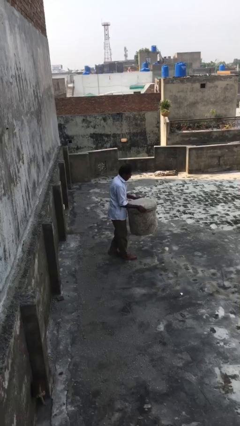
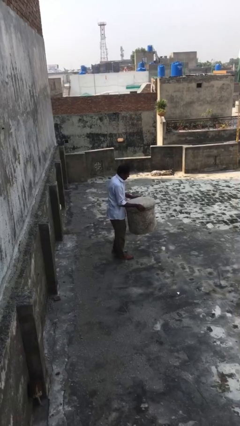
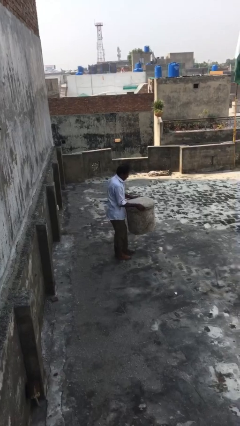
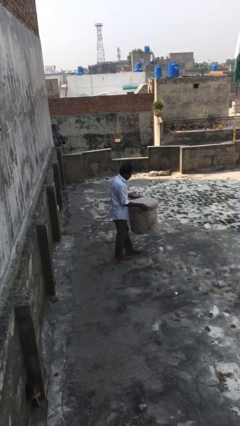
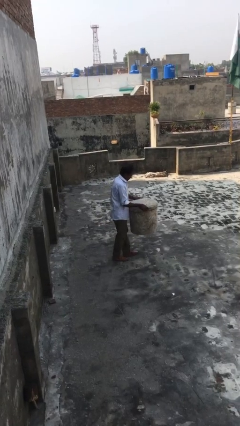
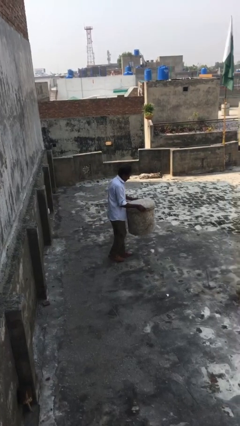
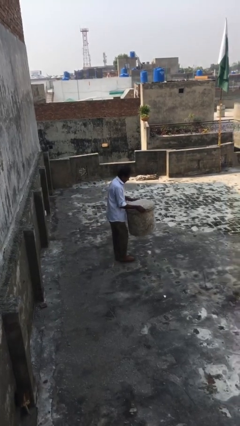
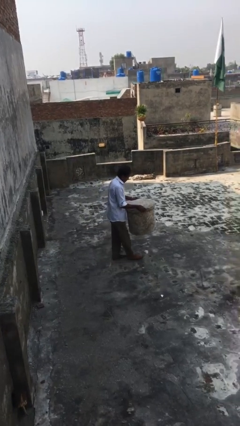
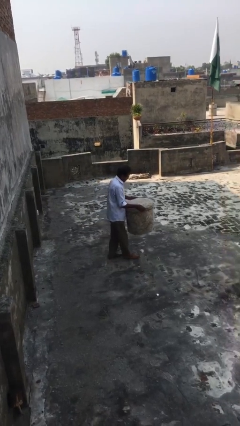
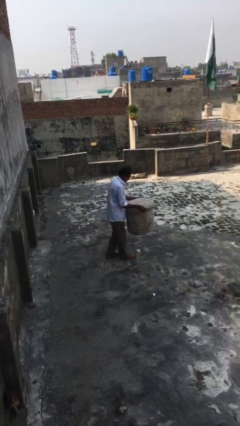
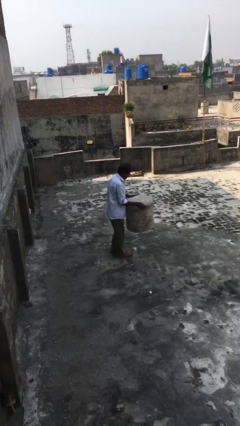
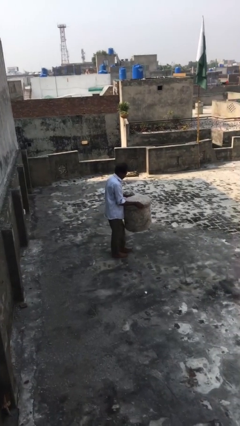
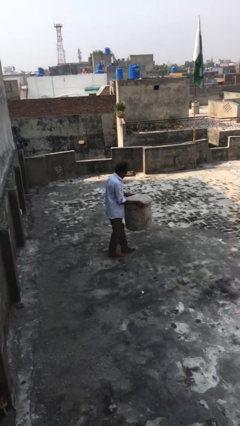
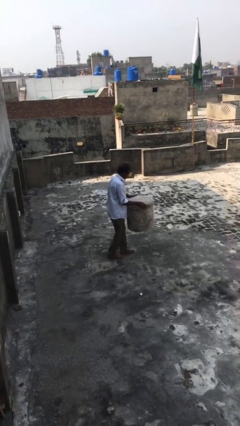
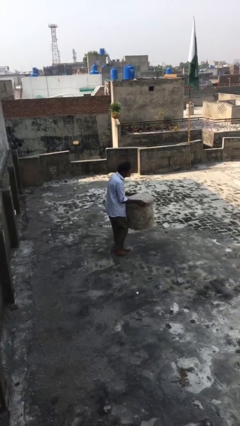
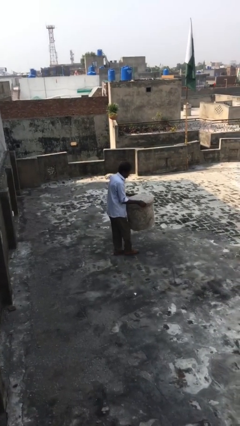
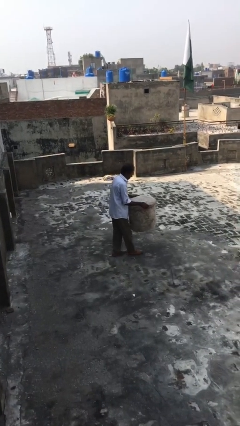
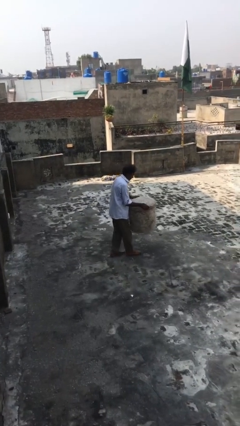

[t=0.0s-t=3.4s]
person carries heavy object

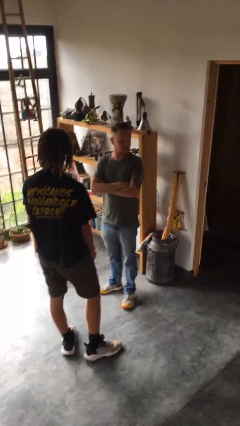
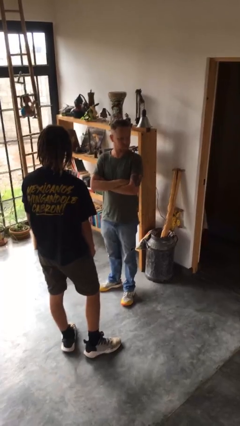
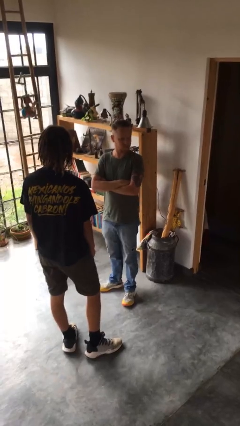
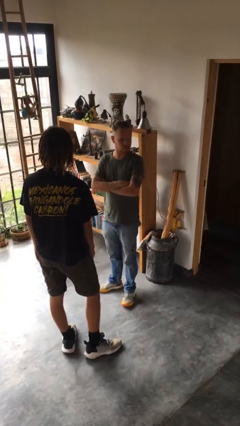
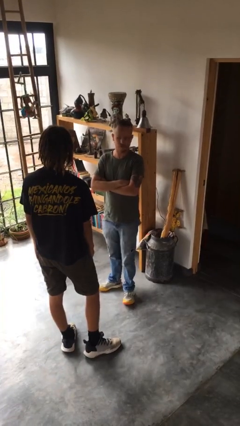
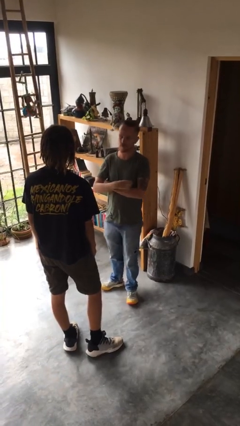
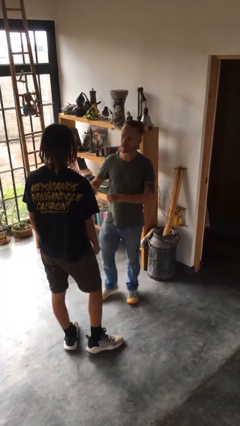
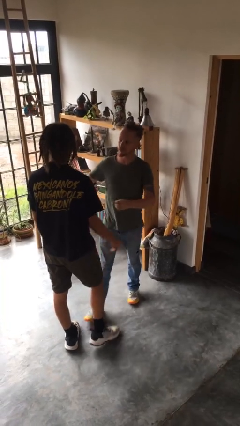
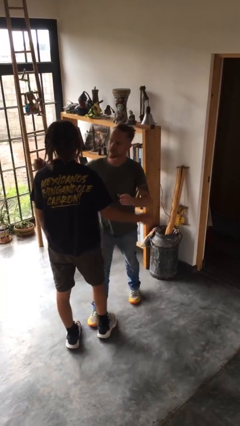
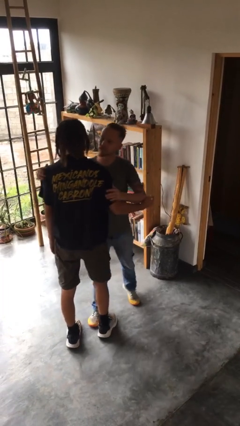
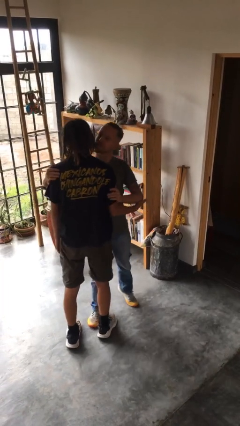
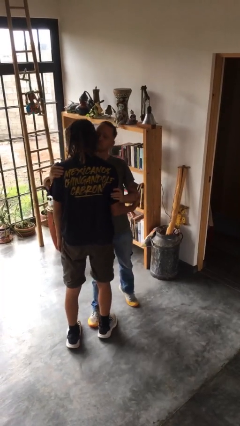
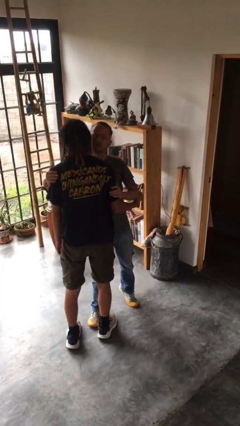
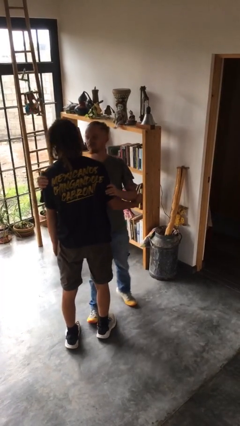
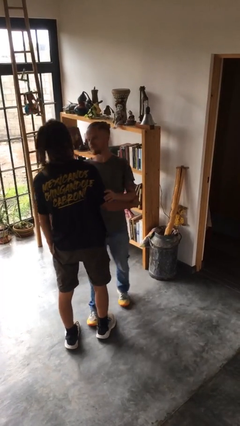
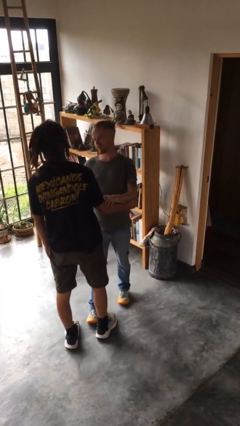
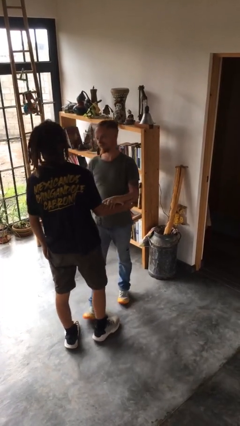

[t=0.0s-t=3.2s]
person kisses cheek of person

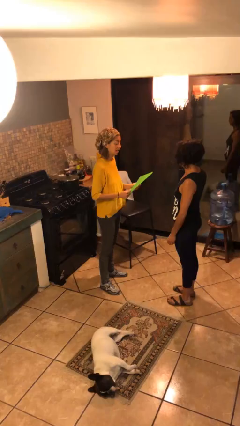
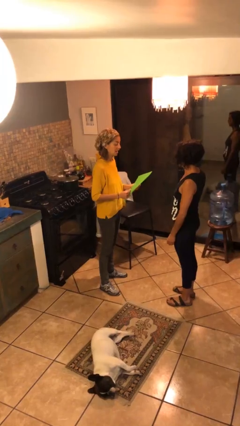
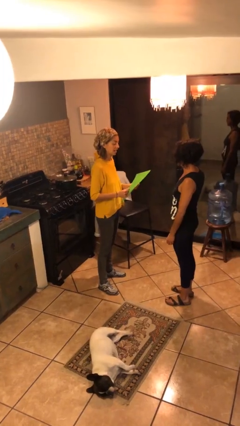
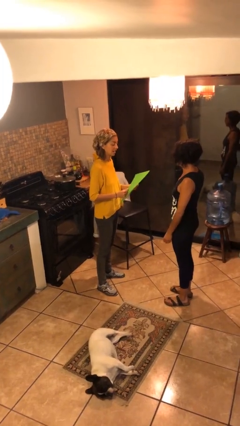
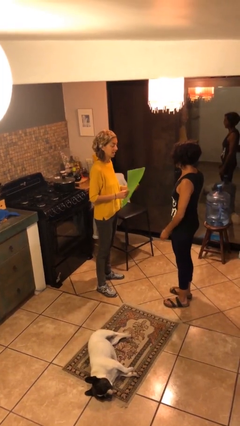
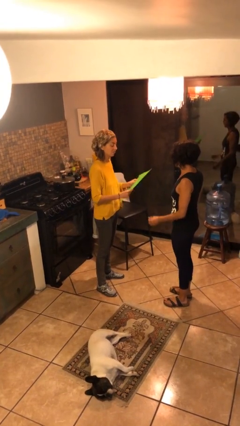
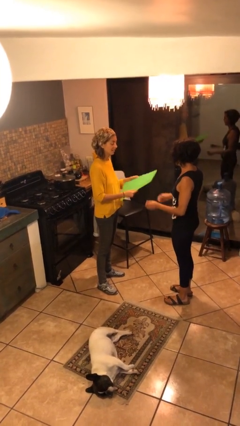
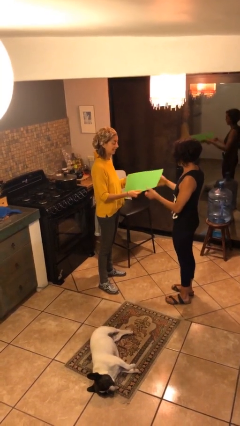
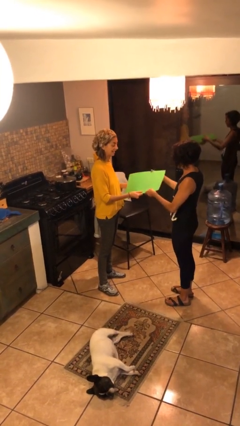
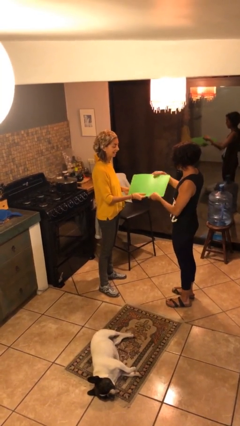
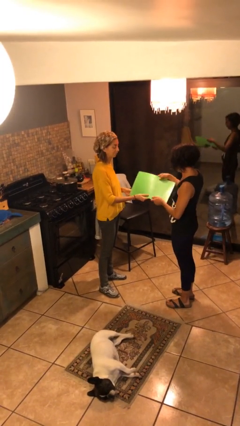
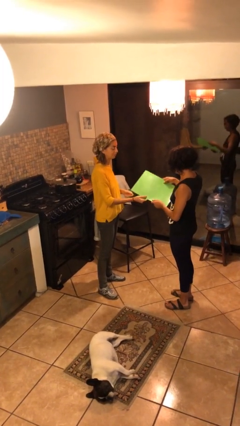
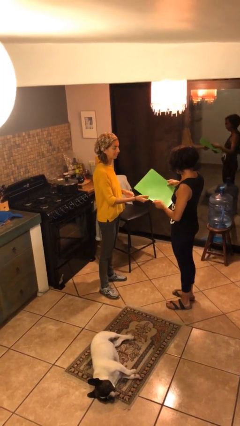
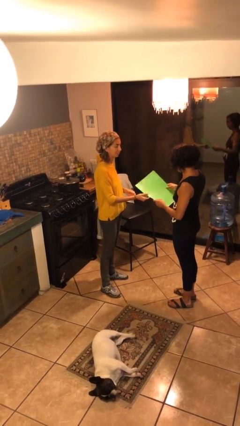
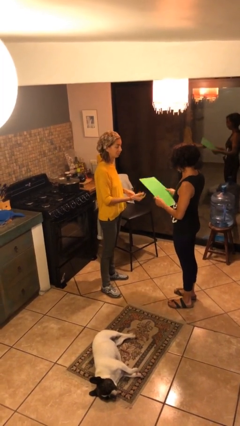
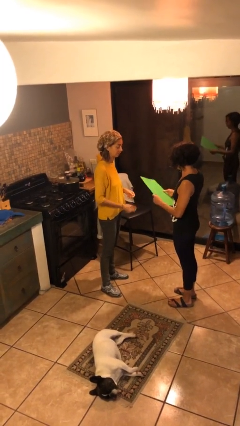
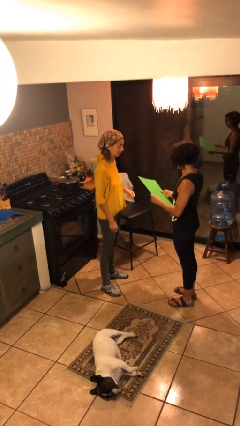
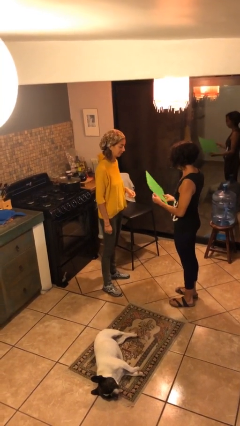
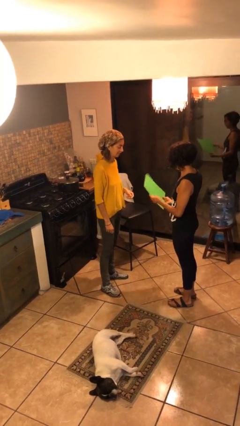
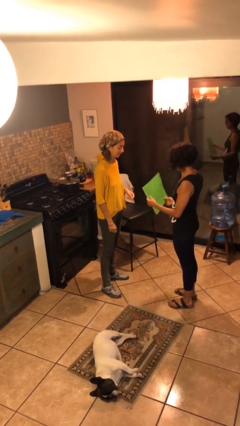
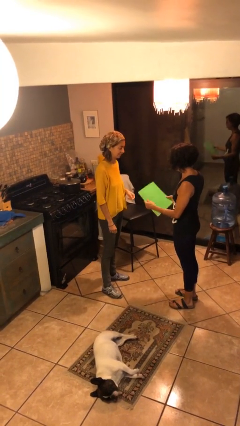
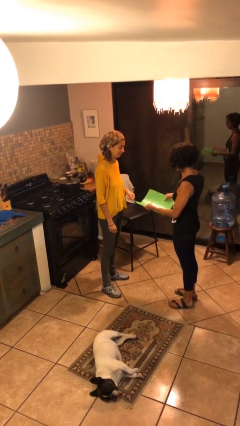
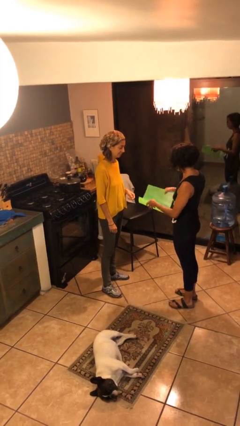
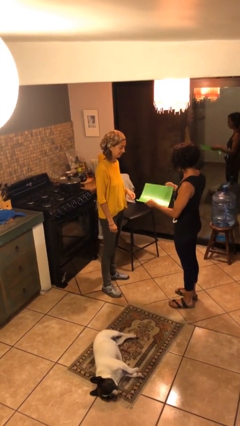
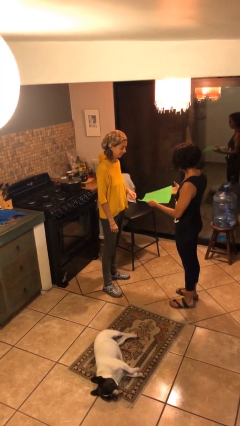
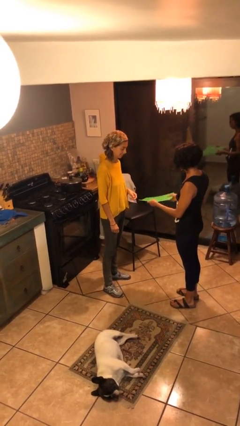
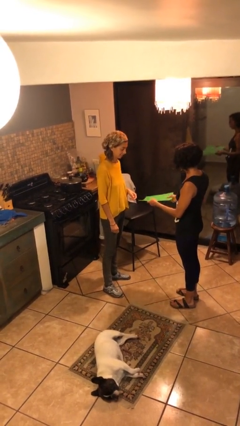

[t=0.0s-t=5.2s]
person transfers object to person

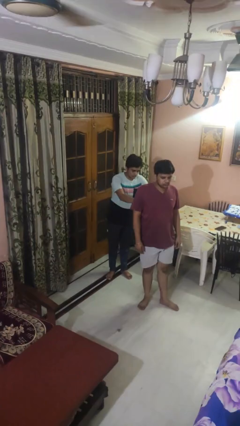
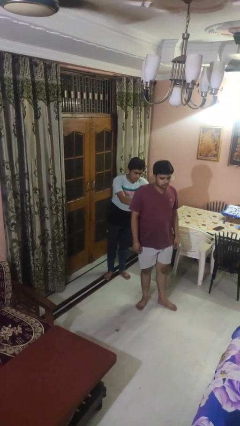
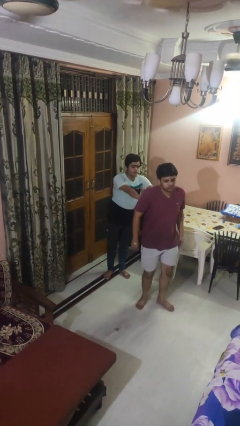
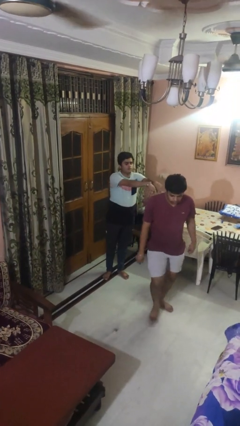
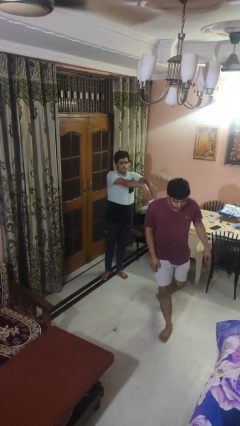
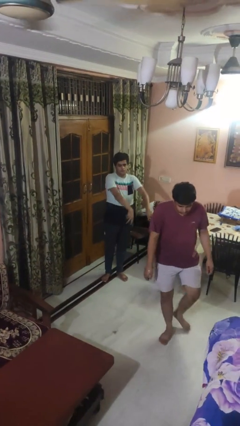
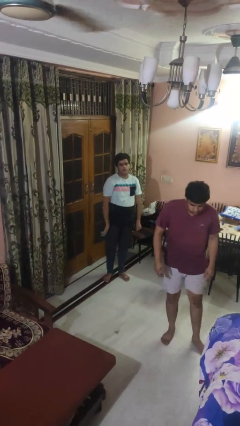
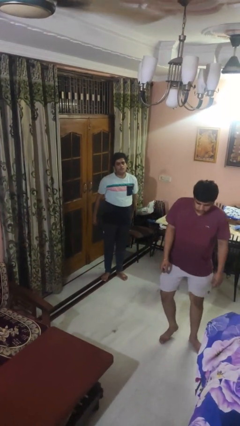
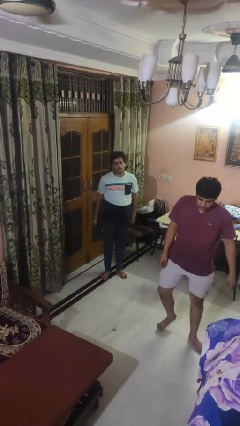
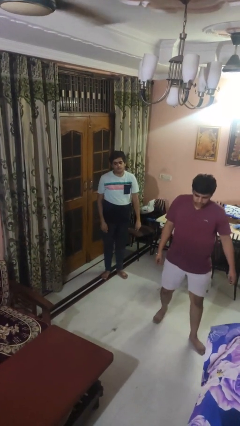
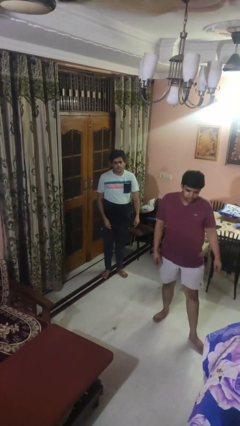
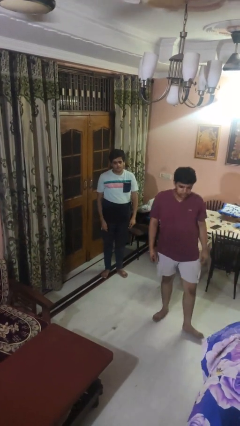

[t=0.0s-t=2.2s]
person shoves person

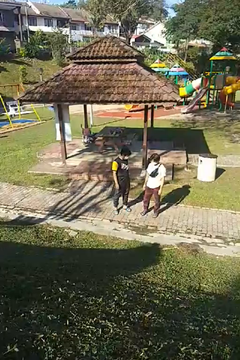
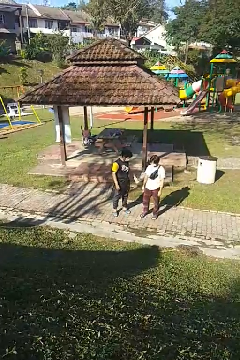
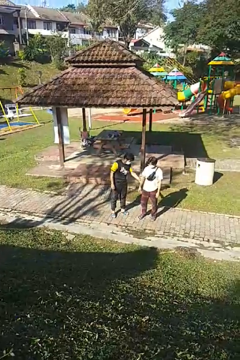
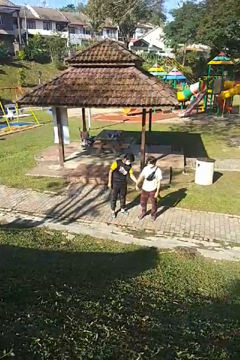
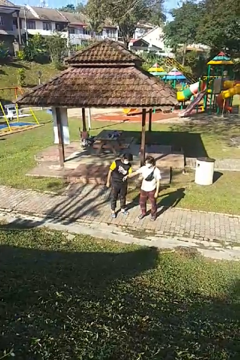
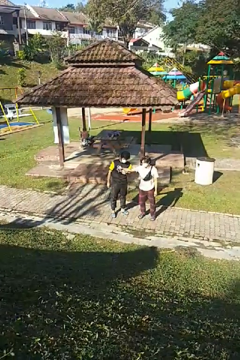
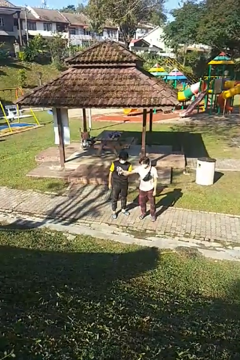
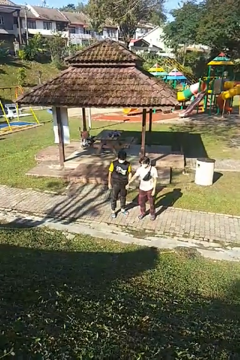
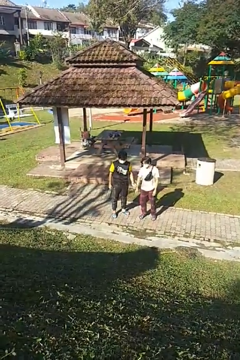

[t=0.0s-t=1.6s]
person grabs person by forearm

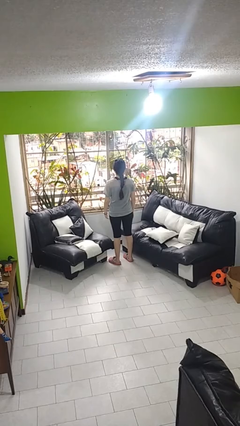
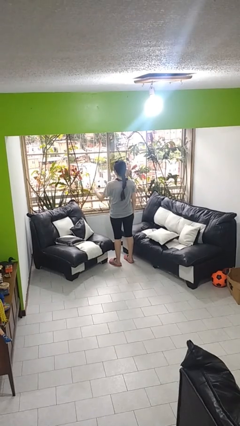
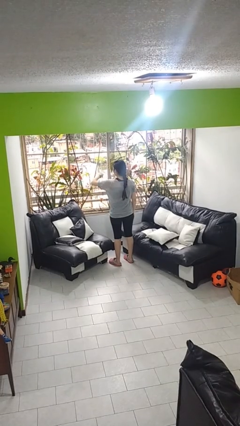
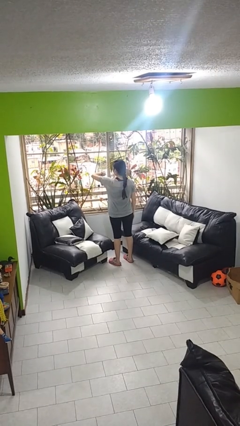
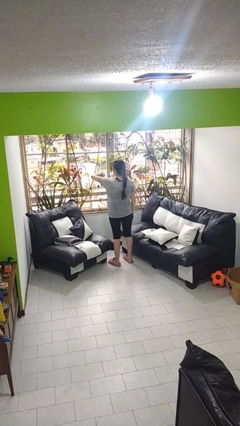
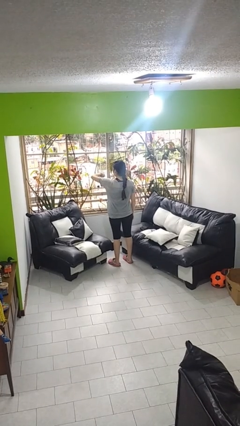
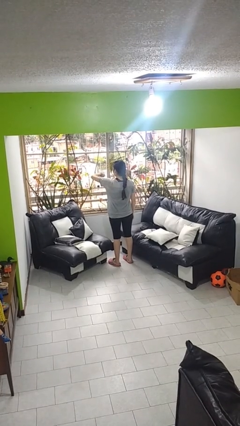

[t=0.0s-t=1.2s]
person looks at wristwatch

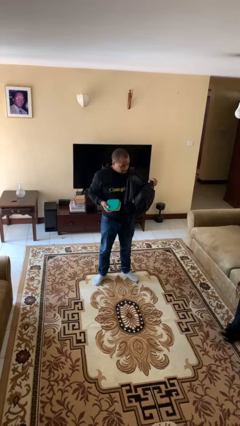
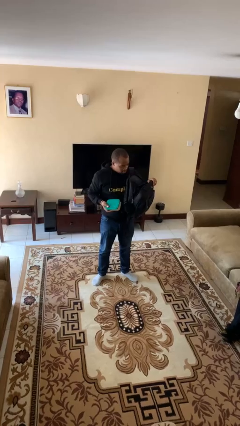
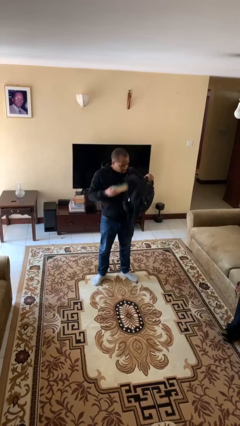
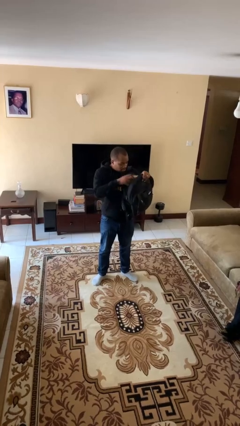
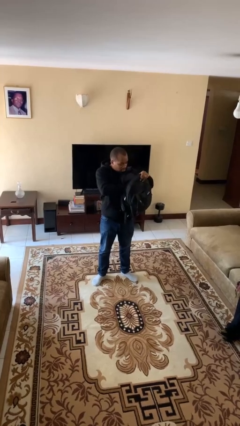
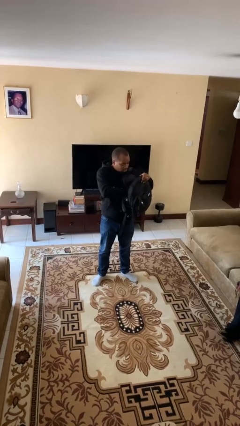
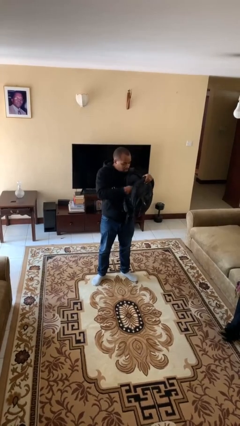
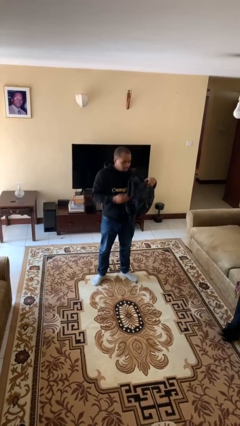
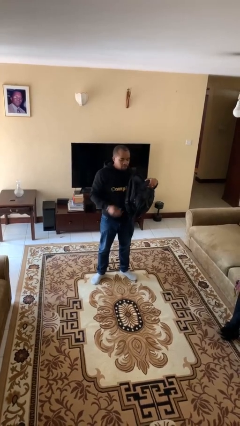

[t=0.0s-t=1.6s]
person puts object into backpack
